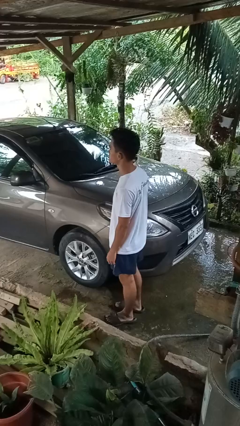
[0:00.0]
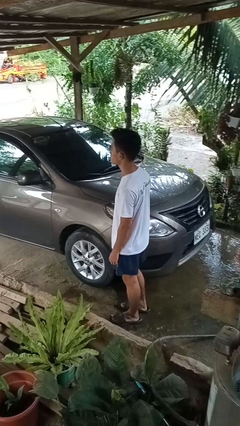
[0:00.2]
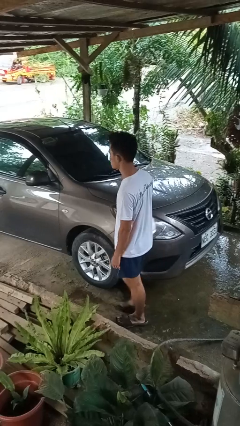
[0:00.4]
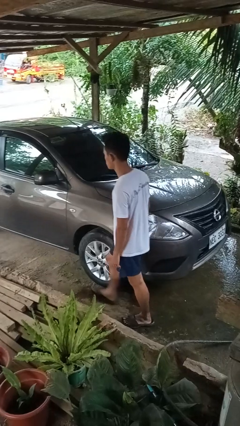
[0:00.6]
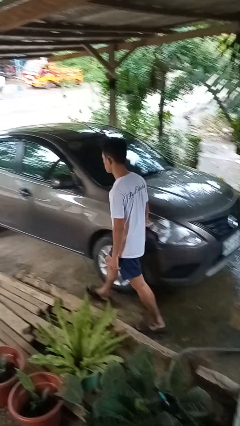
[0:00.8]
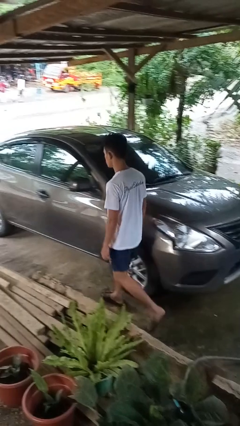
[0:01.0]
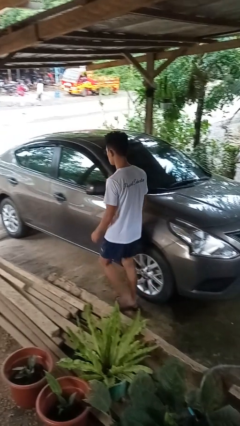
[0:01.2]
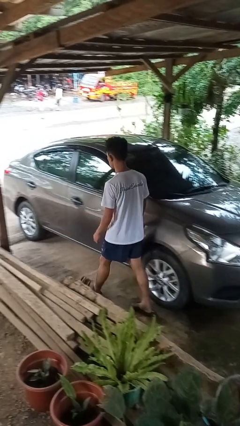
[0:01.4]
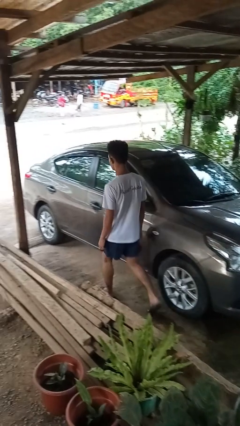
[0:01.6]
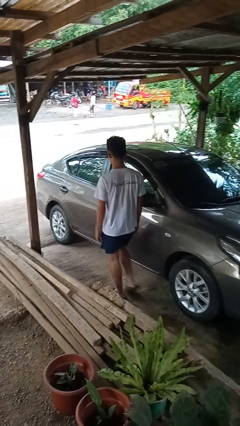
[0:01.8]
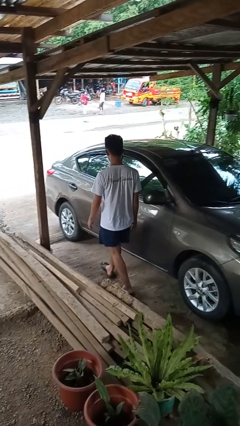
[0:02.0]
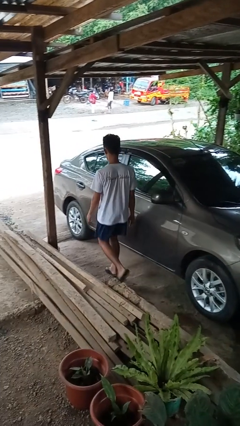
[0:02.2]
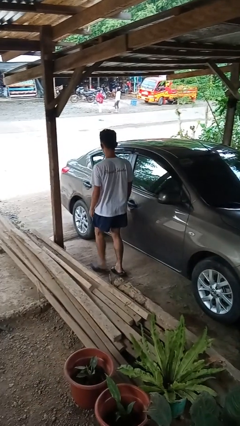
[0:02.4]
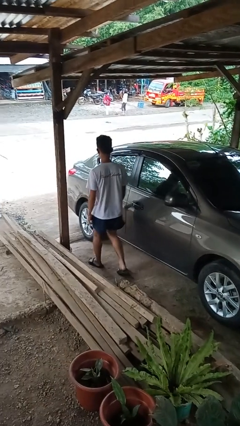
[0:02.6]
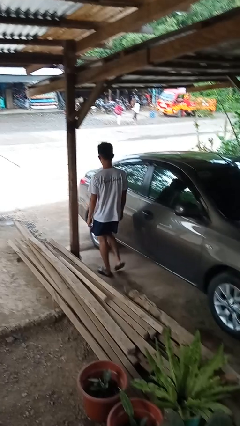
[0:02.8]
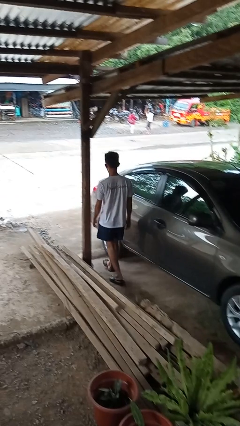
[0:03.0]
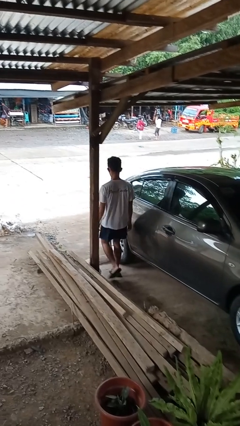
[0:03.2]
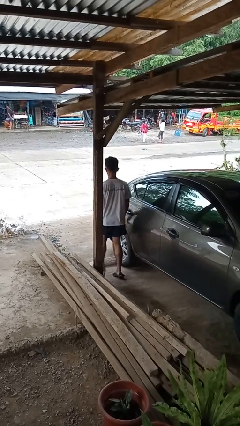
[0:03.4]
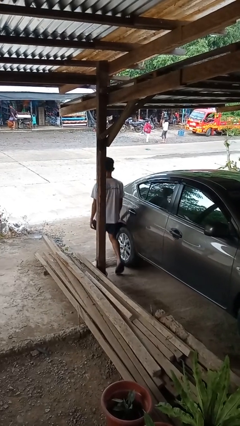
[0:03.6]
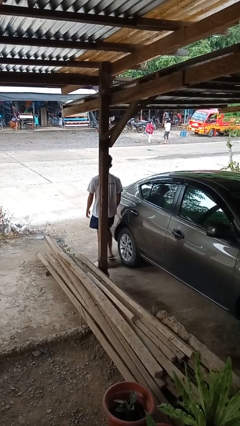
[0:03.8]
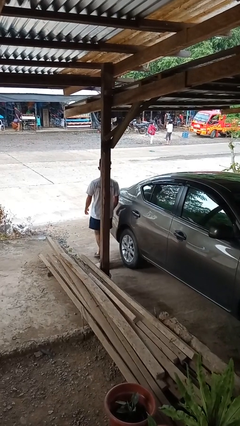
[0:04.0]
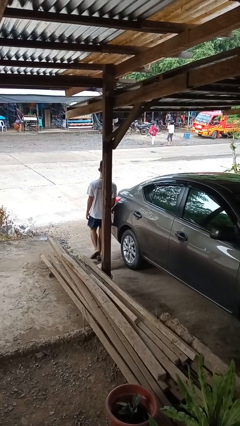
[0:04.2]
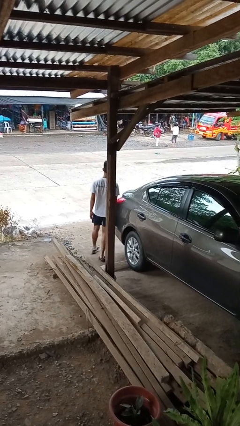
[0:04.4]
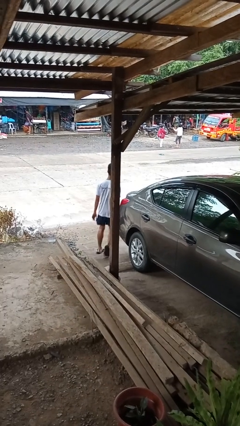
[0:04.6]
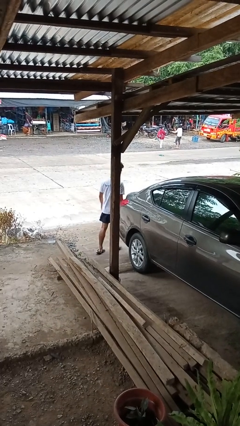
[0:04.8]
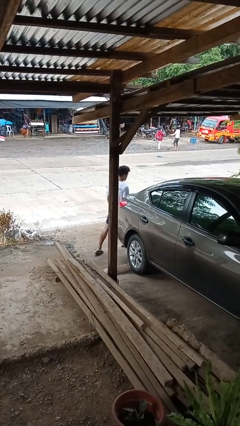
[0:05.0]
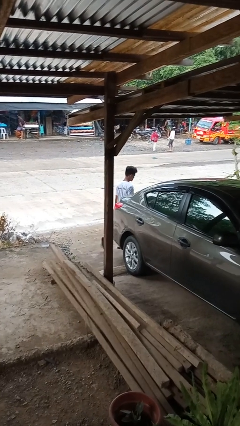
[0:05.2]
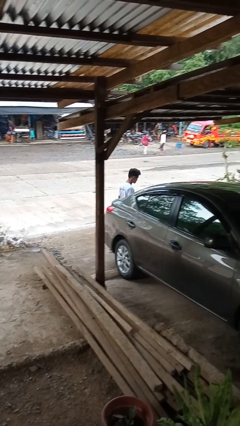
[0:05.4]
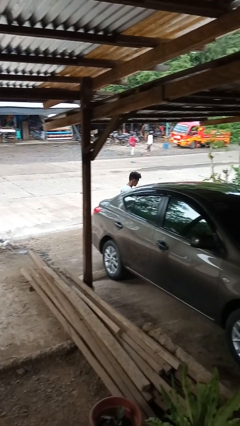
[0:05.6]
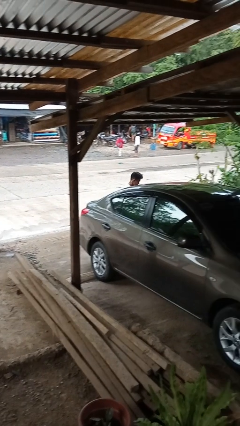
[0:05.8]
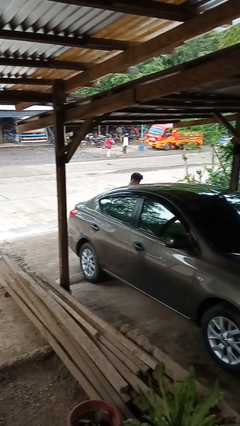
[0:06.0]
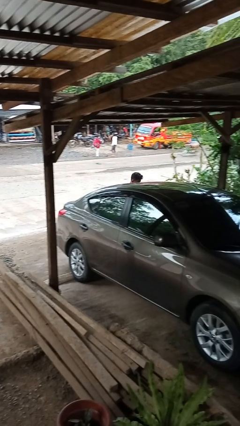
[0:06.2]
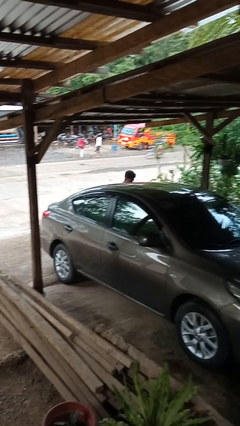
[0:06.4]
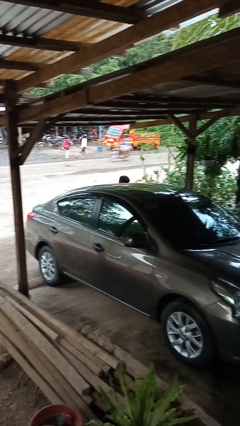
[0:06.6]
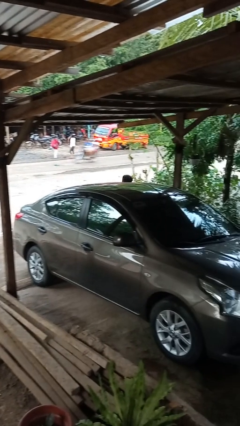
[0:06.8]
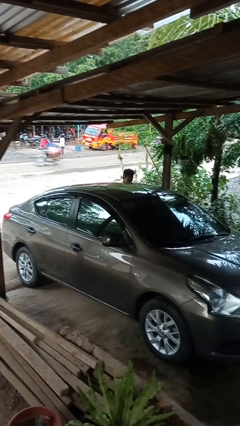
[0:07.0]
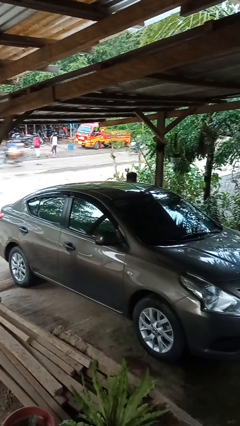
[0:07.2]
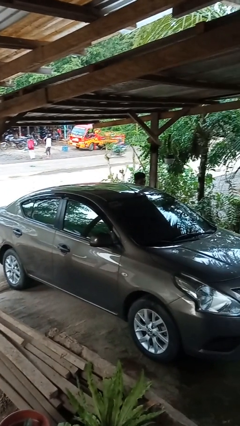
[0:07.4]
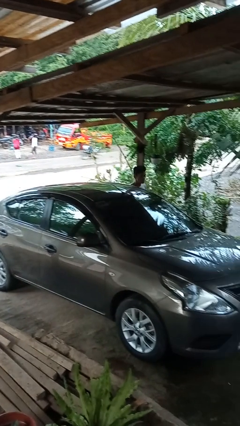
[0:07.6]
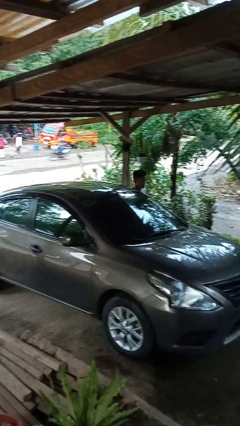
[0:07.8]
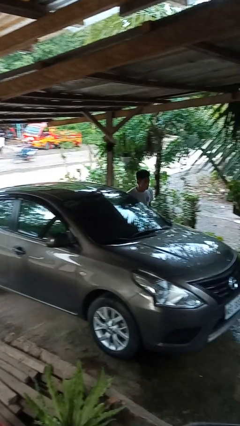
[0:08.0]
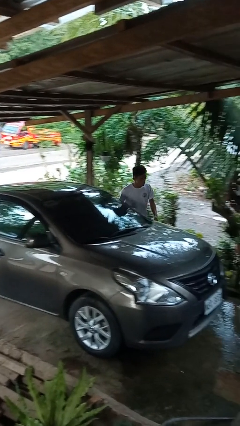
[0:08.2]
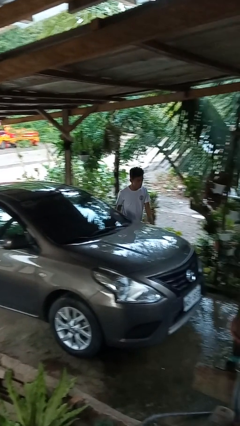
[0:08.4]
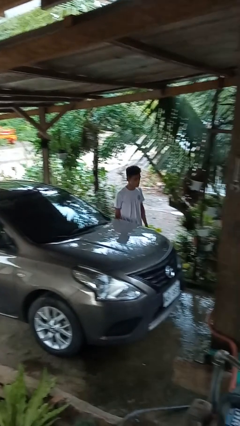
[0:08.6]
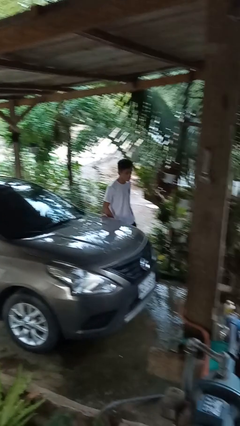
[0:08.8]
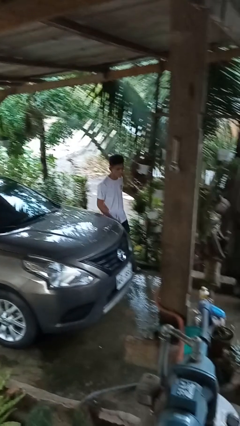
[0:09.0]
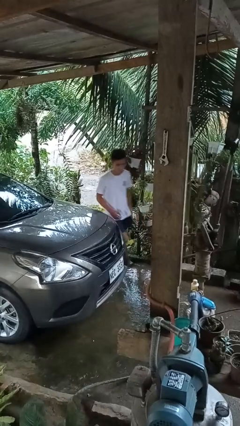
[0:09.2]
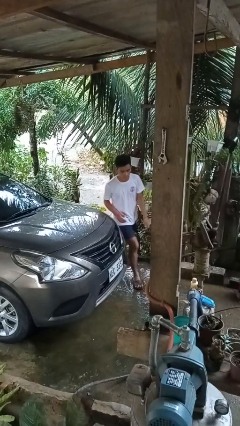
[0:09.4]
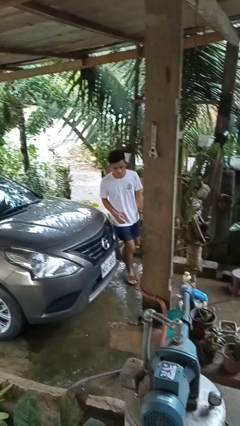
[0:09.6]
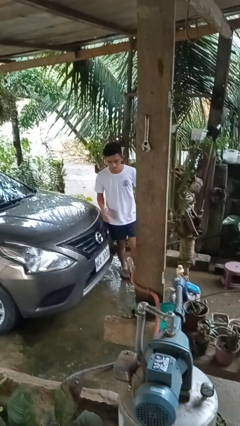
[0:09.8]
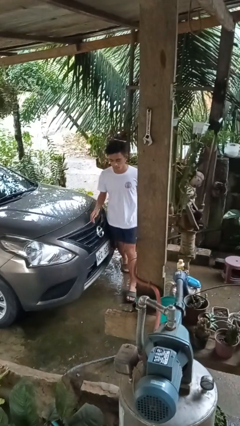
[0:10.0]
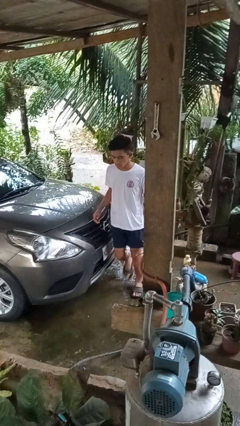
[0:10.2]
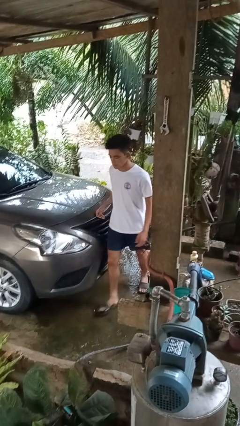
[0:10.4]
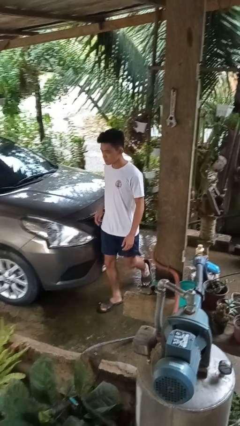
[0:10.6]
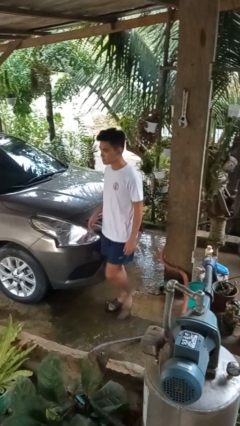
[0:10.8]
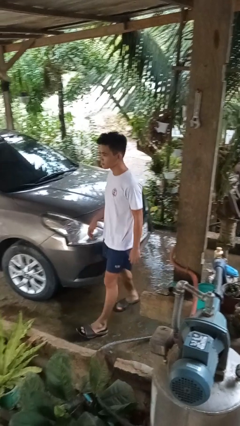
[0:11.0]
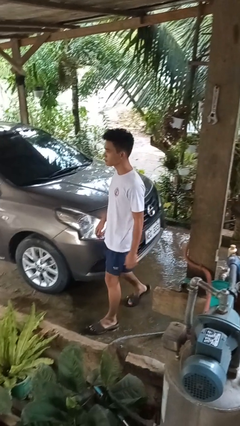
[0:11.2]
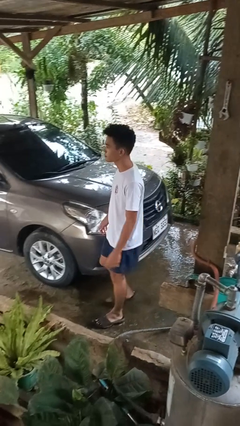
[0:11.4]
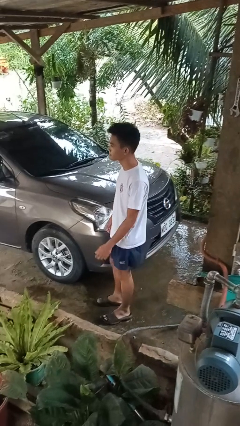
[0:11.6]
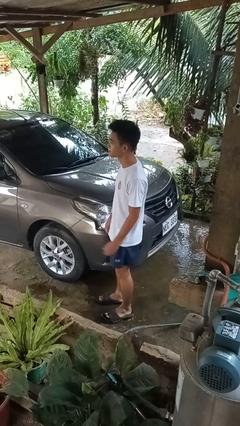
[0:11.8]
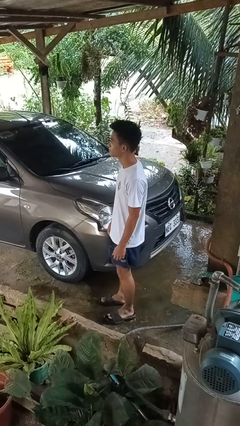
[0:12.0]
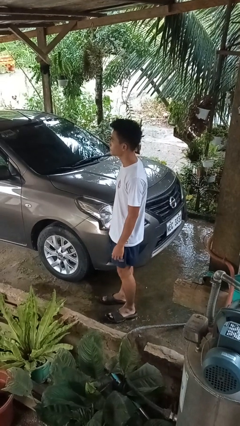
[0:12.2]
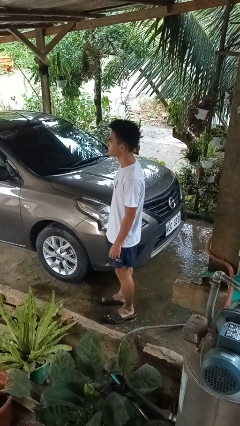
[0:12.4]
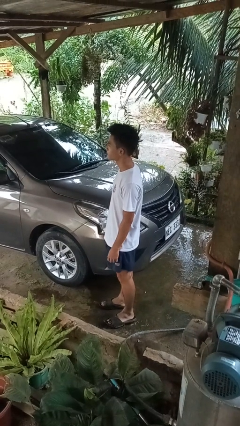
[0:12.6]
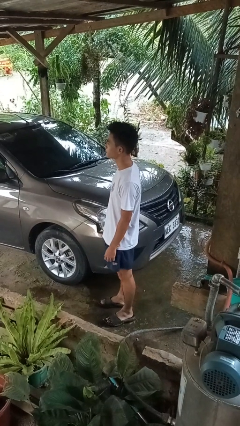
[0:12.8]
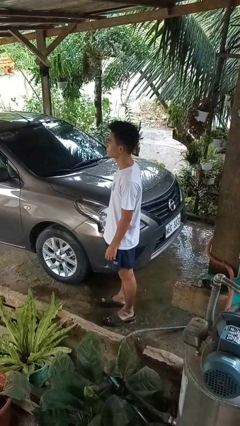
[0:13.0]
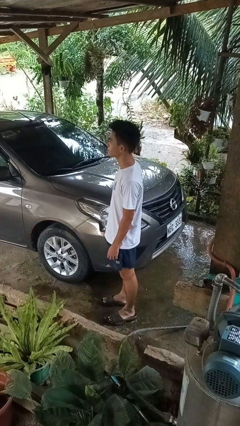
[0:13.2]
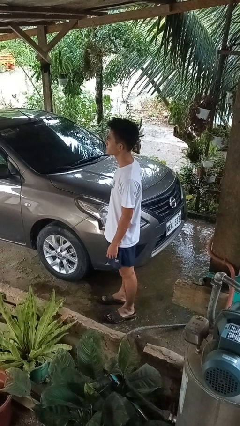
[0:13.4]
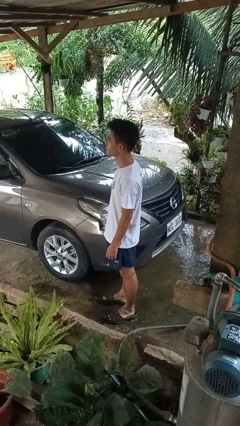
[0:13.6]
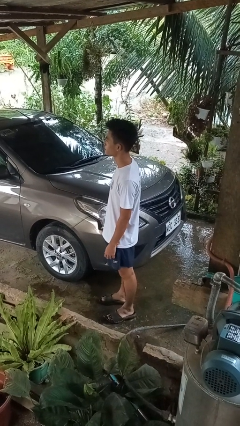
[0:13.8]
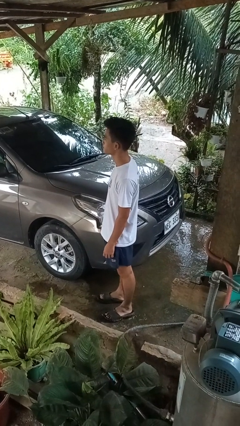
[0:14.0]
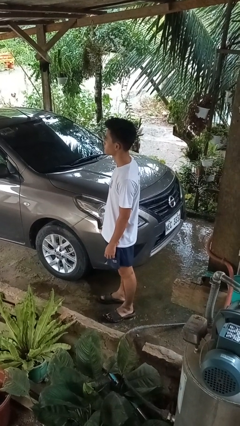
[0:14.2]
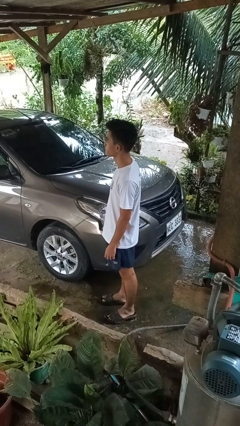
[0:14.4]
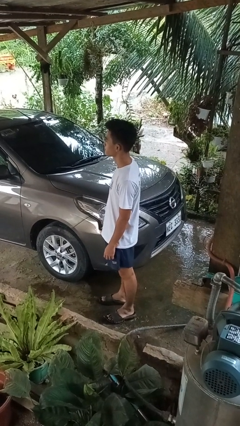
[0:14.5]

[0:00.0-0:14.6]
person walks around car

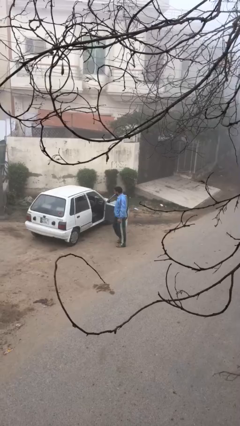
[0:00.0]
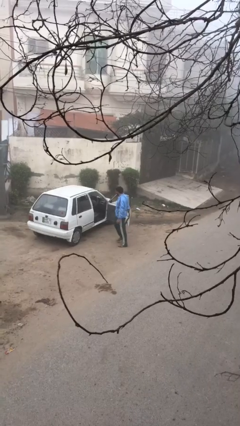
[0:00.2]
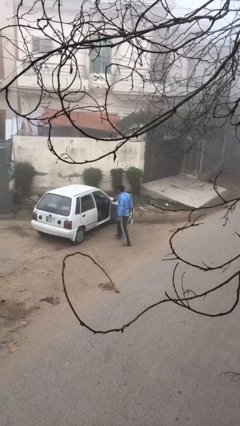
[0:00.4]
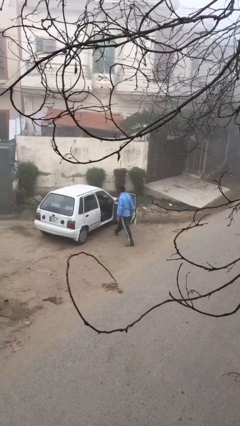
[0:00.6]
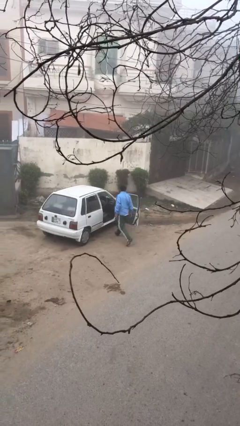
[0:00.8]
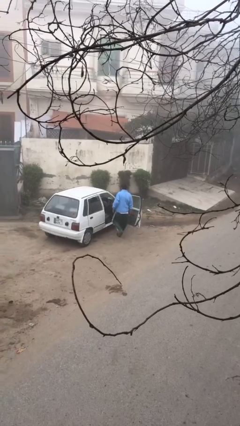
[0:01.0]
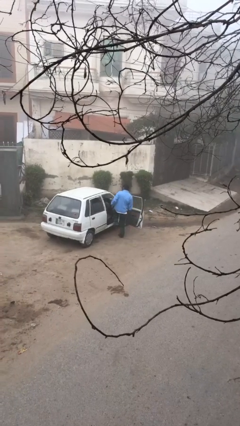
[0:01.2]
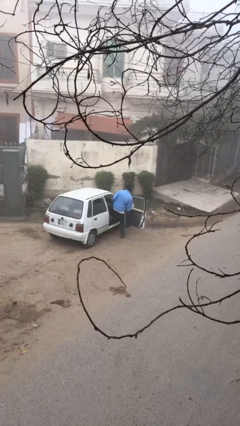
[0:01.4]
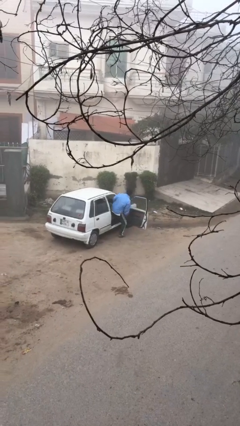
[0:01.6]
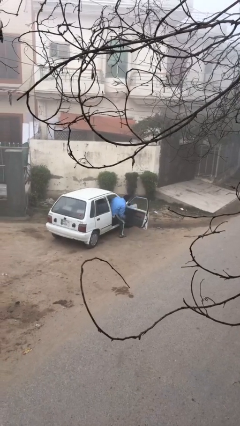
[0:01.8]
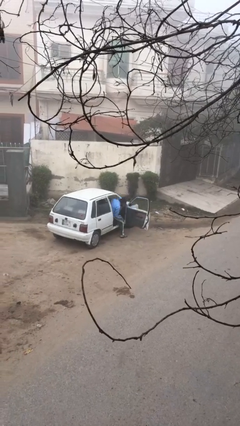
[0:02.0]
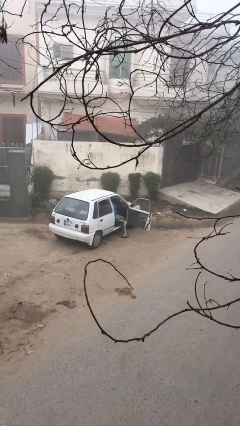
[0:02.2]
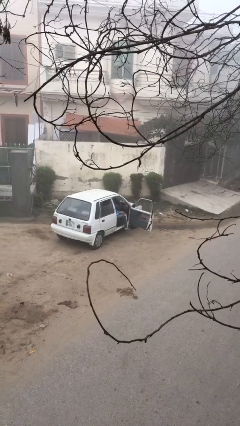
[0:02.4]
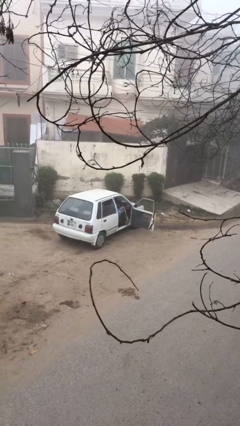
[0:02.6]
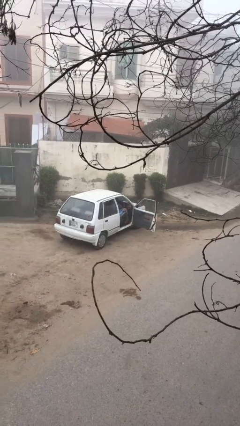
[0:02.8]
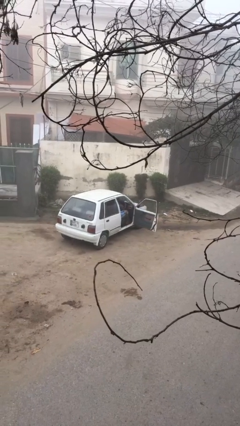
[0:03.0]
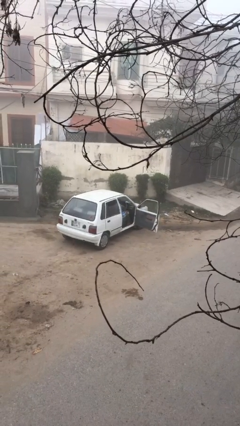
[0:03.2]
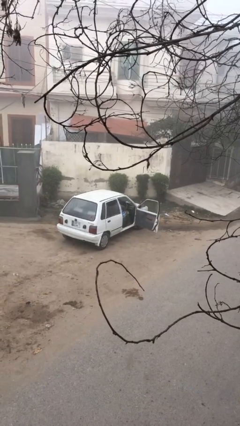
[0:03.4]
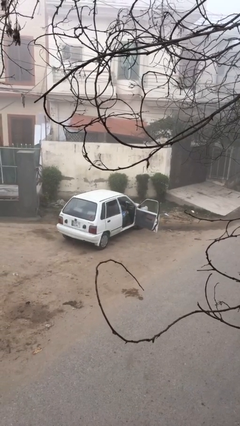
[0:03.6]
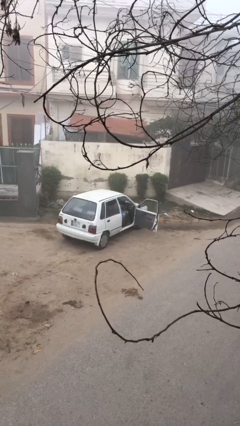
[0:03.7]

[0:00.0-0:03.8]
person enters car

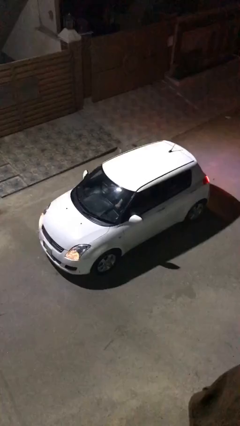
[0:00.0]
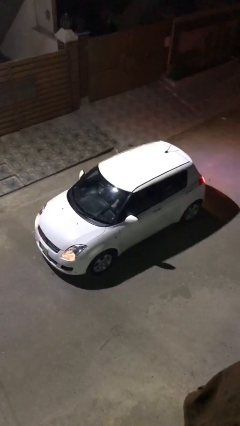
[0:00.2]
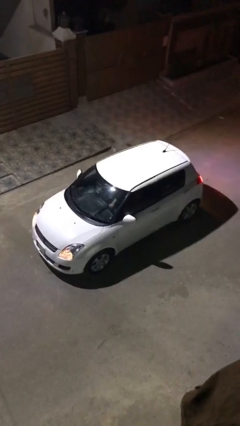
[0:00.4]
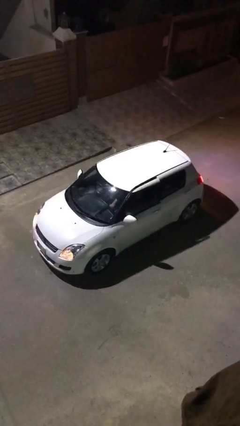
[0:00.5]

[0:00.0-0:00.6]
car drops off person
